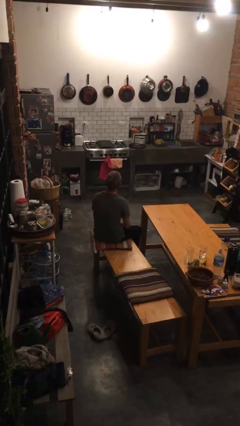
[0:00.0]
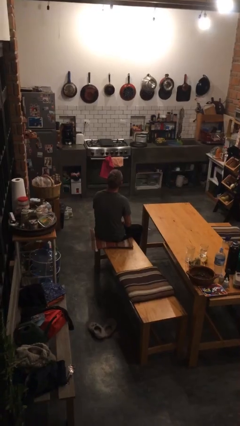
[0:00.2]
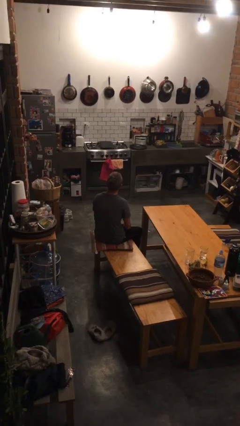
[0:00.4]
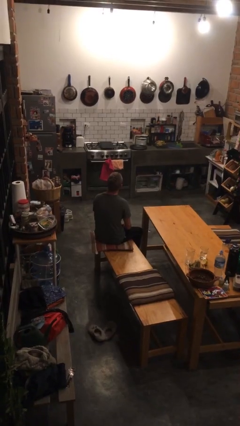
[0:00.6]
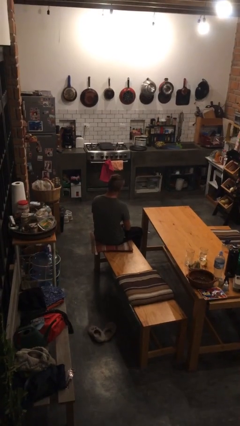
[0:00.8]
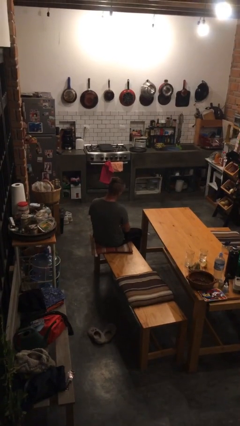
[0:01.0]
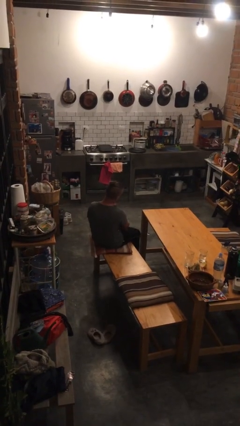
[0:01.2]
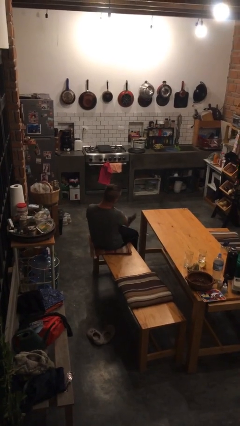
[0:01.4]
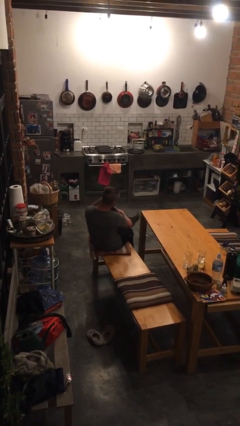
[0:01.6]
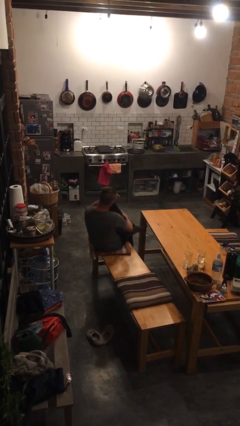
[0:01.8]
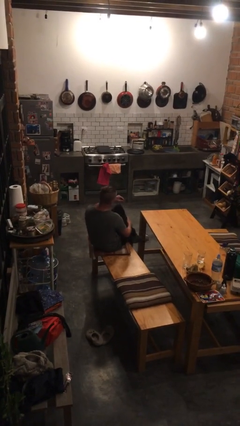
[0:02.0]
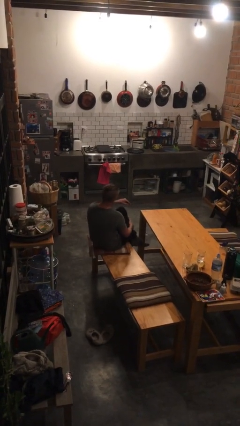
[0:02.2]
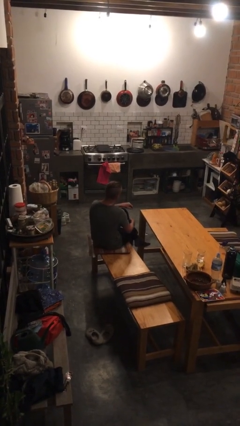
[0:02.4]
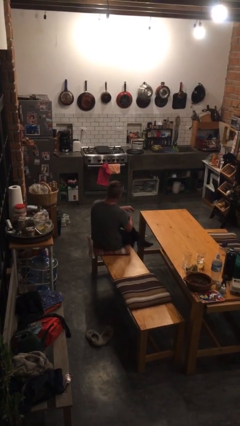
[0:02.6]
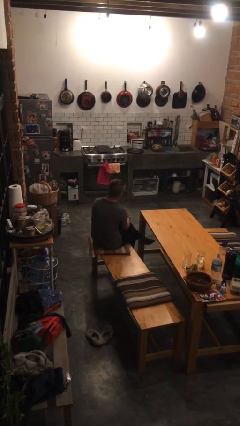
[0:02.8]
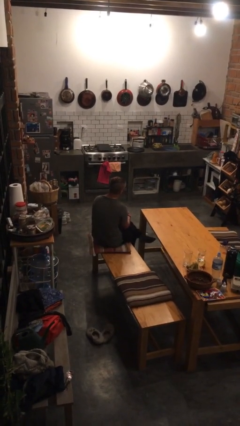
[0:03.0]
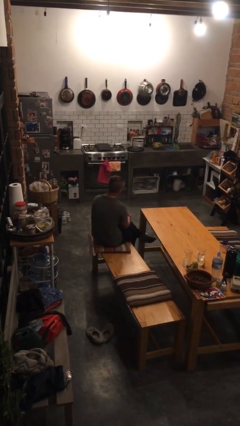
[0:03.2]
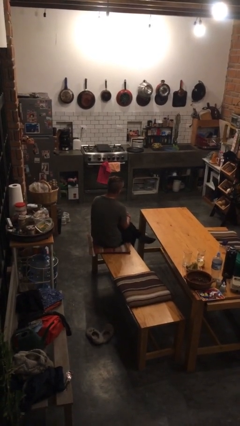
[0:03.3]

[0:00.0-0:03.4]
person crosses legs

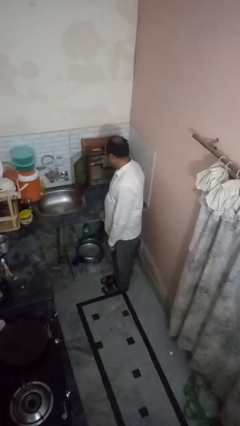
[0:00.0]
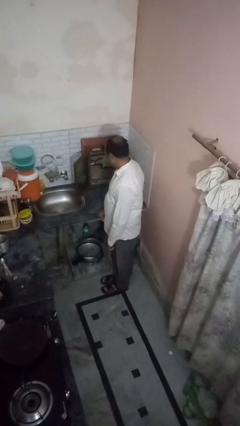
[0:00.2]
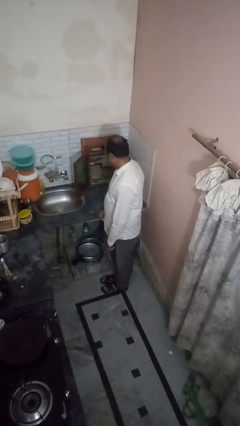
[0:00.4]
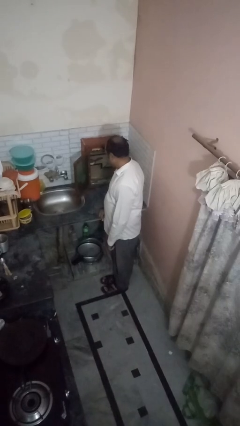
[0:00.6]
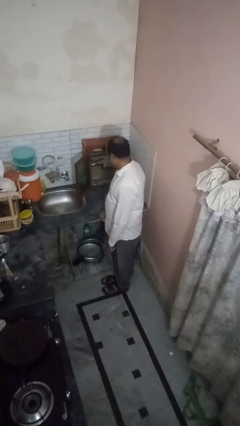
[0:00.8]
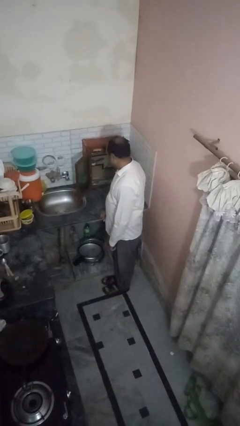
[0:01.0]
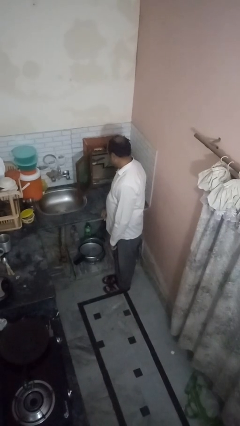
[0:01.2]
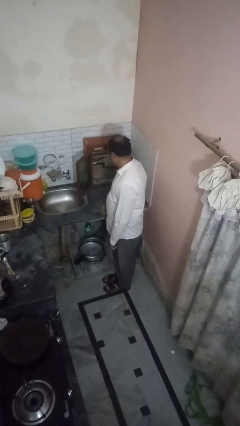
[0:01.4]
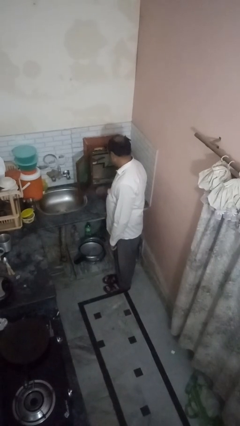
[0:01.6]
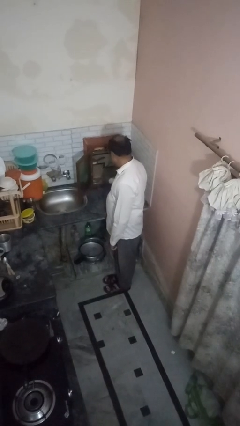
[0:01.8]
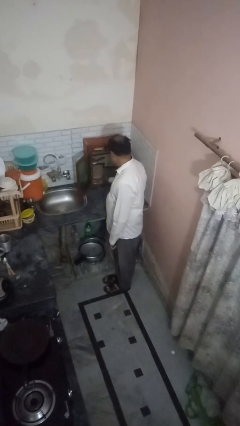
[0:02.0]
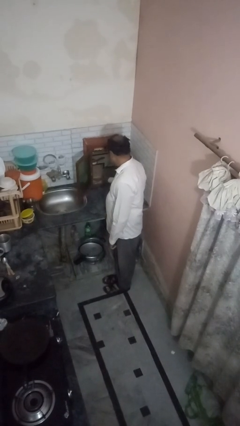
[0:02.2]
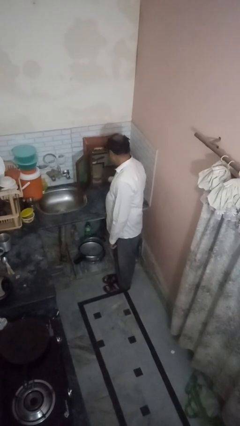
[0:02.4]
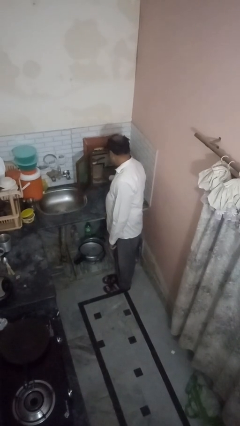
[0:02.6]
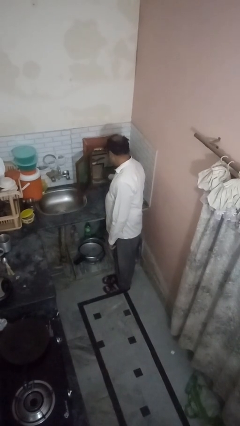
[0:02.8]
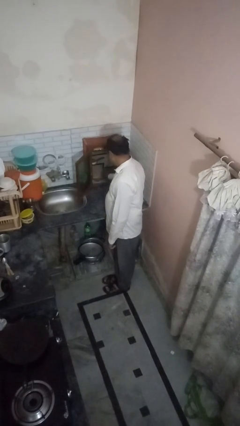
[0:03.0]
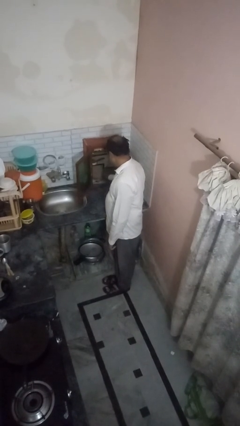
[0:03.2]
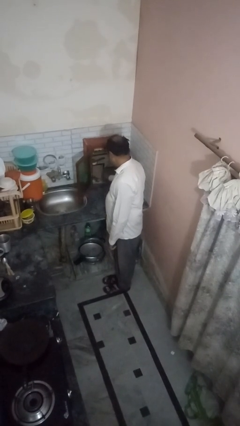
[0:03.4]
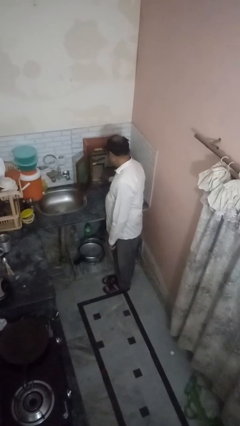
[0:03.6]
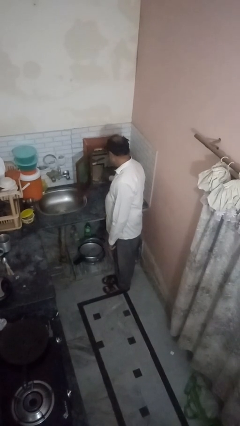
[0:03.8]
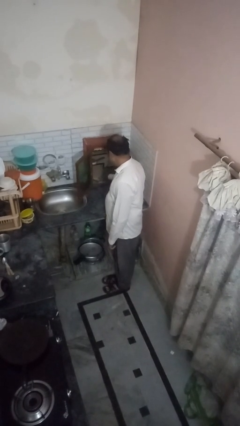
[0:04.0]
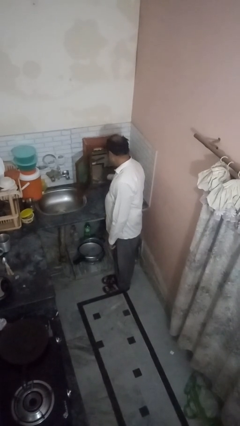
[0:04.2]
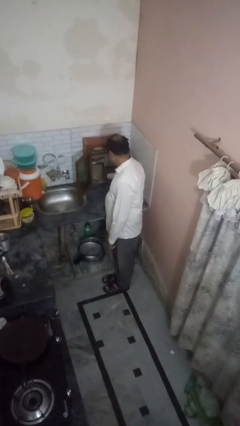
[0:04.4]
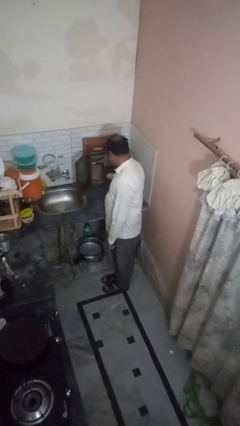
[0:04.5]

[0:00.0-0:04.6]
person searches in kitchen drawer

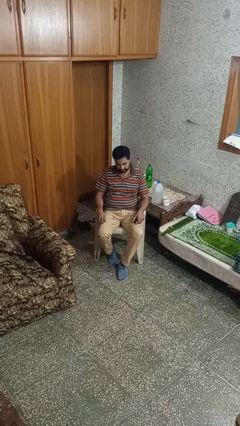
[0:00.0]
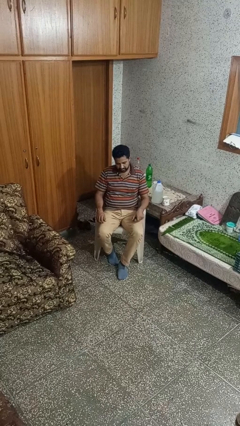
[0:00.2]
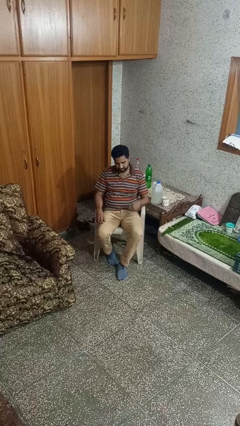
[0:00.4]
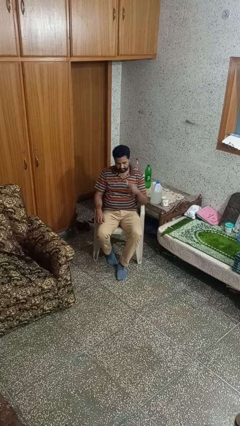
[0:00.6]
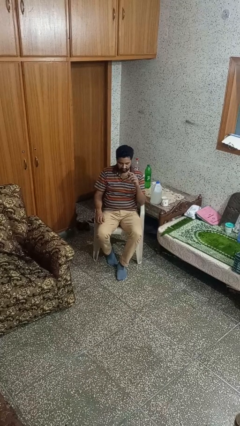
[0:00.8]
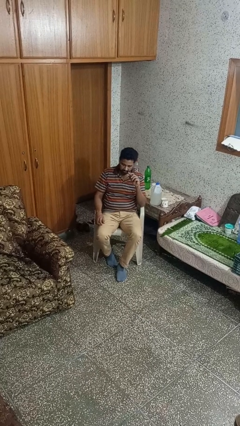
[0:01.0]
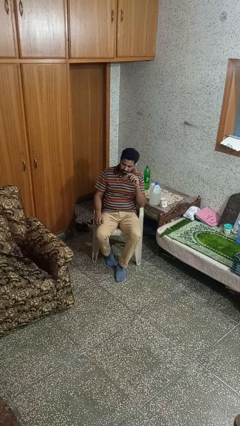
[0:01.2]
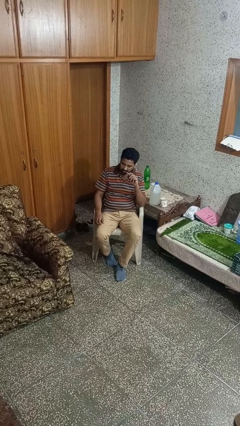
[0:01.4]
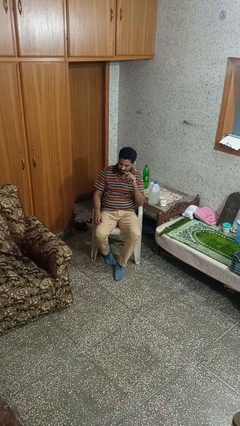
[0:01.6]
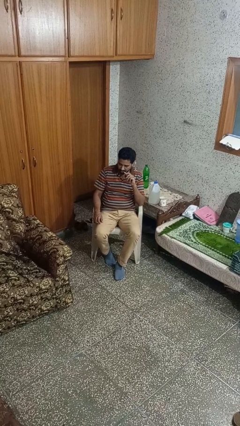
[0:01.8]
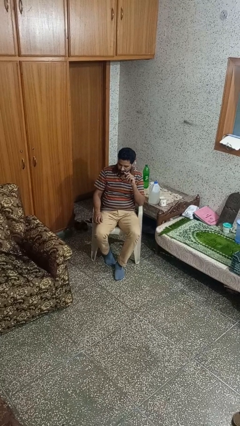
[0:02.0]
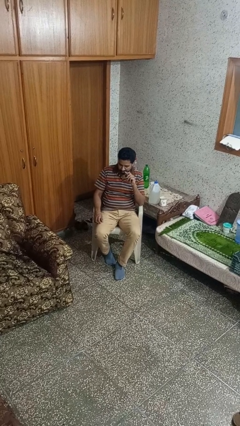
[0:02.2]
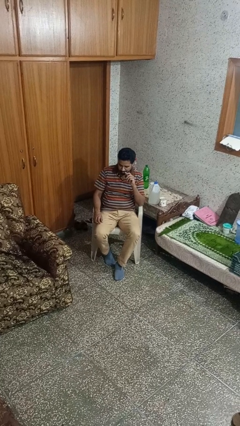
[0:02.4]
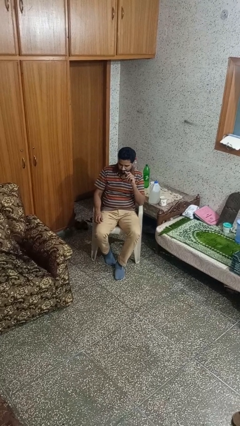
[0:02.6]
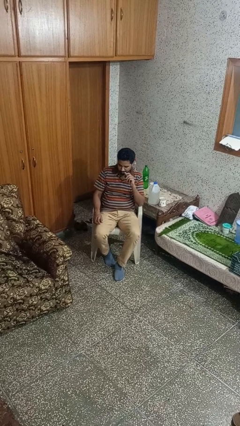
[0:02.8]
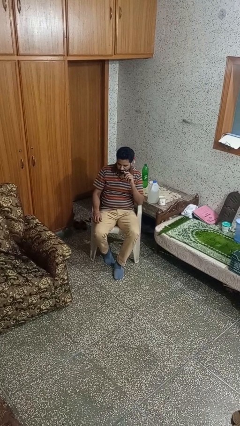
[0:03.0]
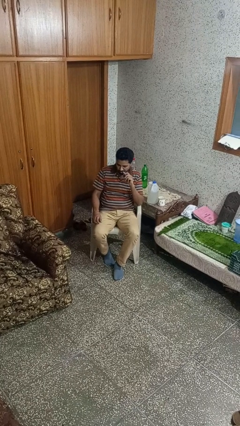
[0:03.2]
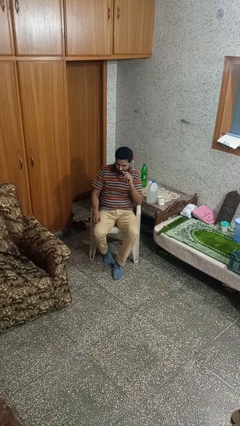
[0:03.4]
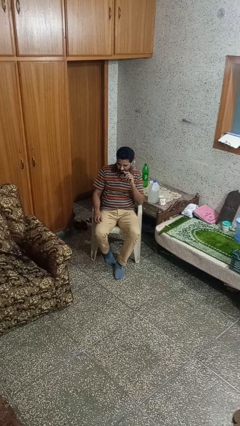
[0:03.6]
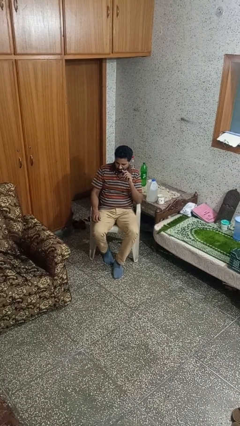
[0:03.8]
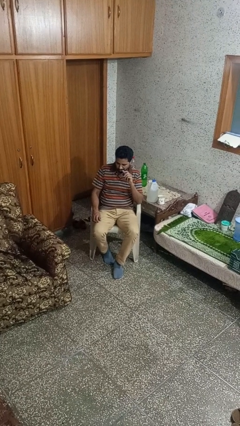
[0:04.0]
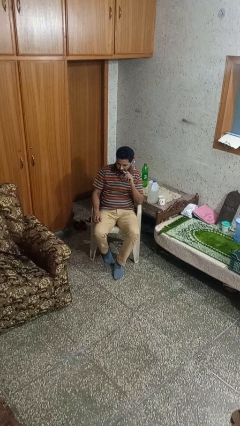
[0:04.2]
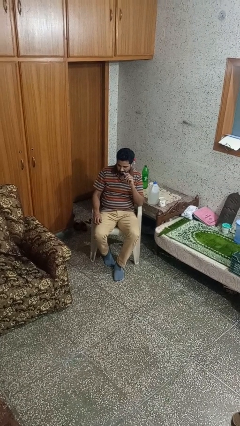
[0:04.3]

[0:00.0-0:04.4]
person vapes

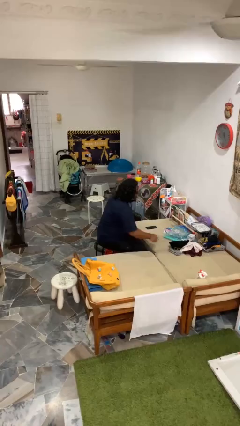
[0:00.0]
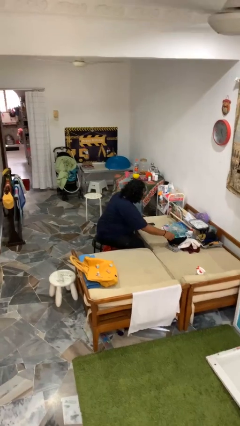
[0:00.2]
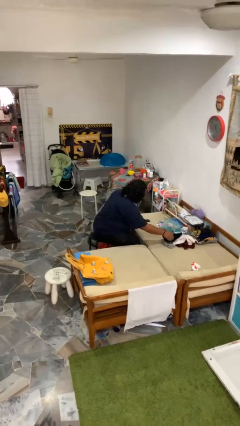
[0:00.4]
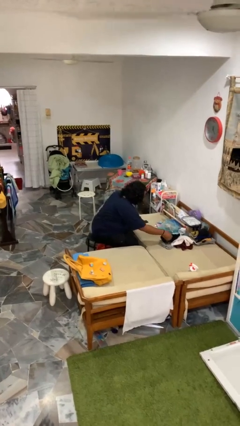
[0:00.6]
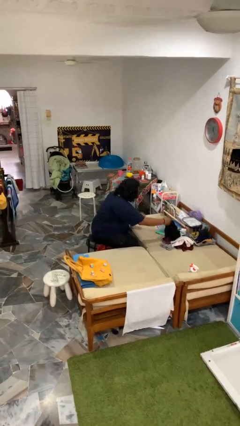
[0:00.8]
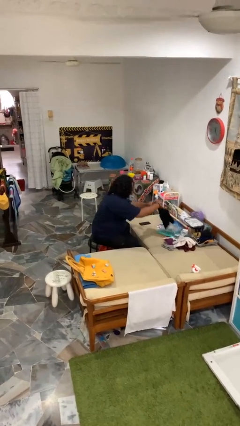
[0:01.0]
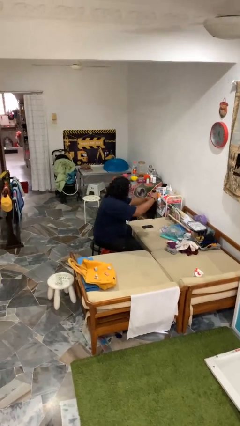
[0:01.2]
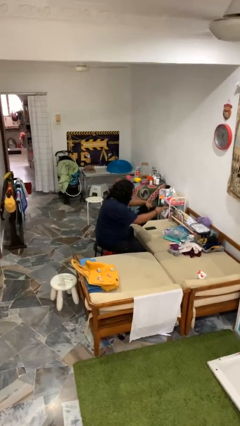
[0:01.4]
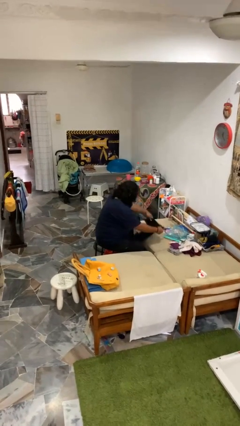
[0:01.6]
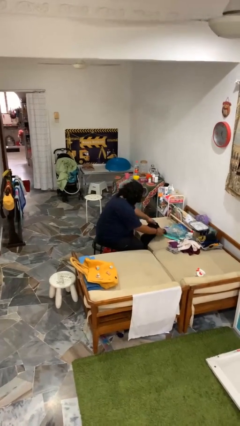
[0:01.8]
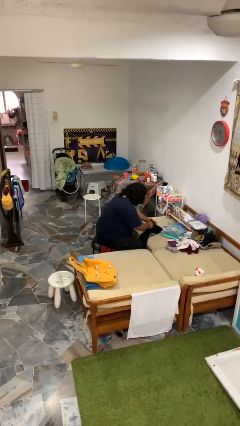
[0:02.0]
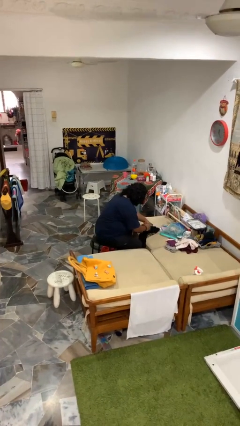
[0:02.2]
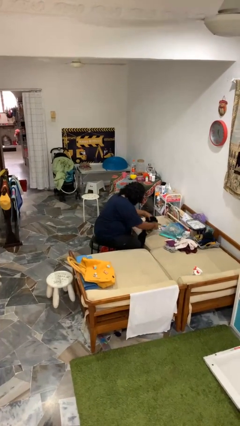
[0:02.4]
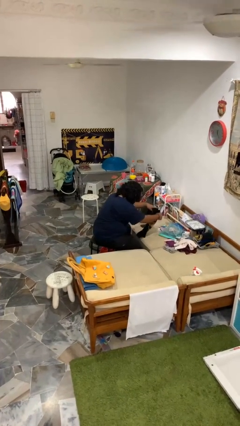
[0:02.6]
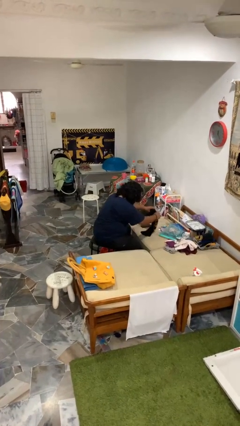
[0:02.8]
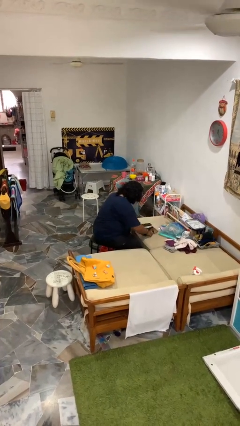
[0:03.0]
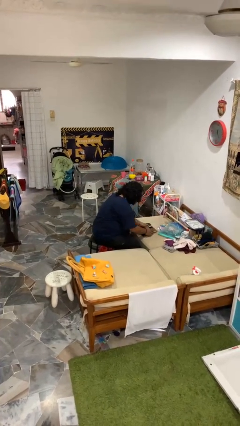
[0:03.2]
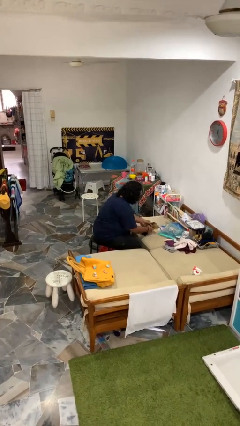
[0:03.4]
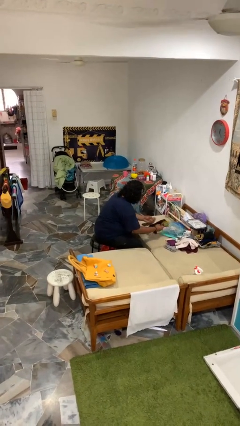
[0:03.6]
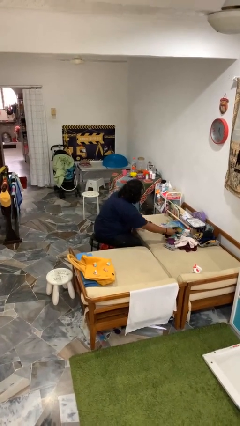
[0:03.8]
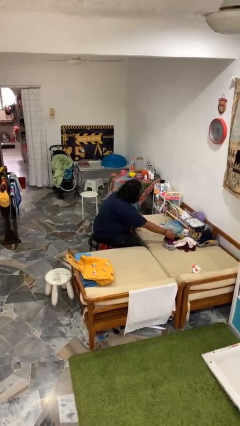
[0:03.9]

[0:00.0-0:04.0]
person folds shirt

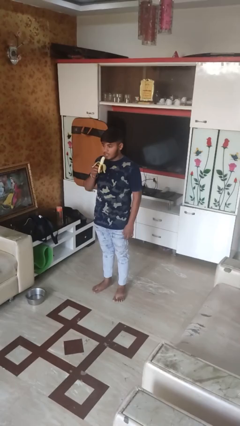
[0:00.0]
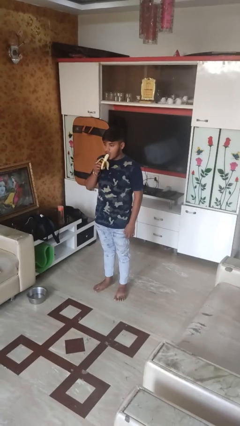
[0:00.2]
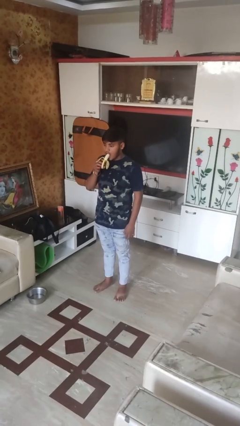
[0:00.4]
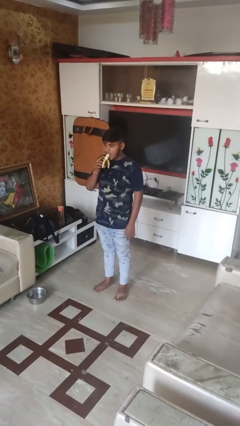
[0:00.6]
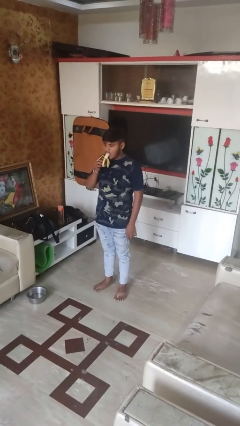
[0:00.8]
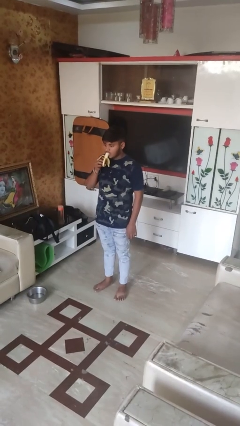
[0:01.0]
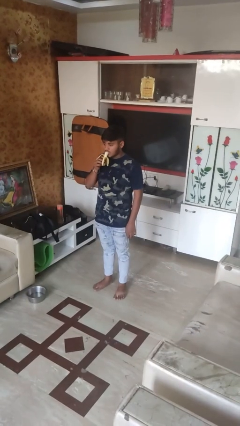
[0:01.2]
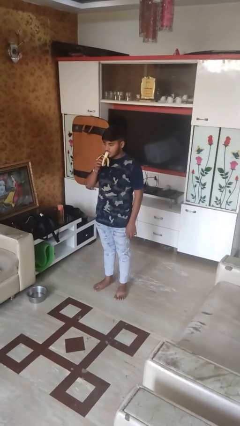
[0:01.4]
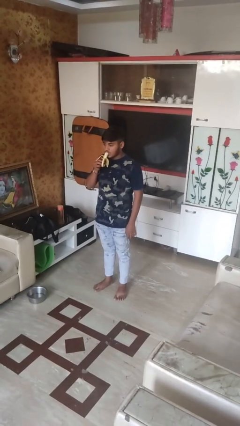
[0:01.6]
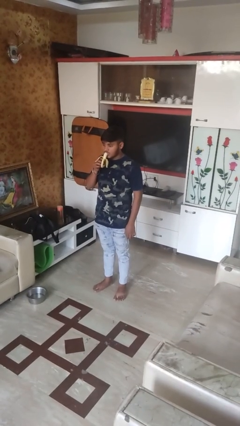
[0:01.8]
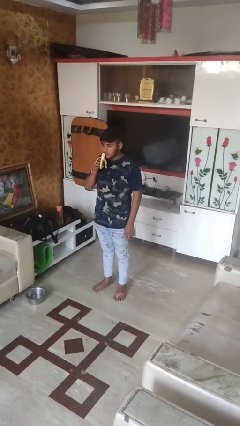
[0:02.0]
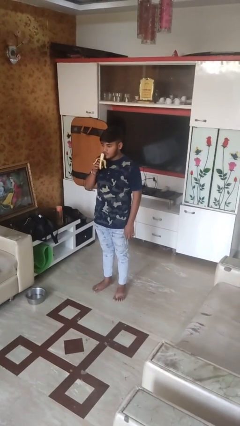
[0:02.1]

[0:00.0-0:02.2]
person eats banana
